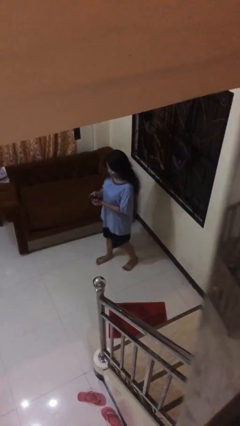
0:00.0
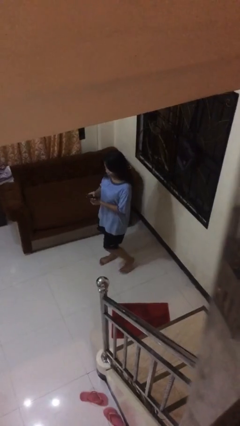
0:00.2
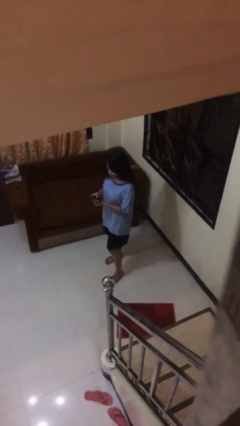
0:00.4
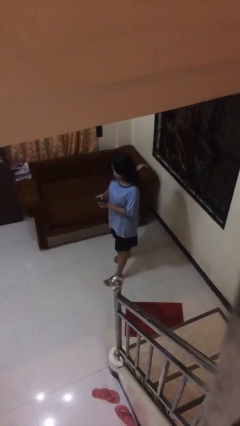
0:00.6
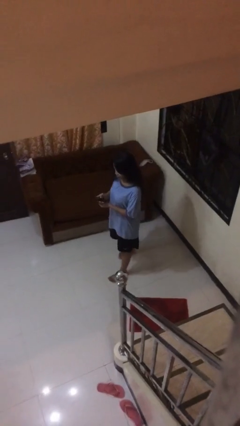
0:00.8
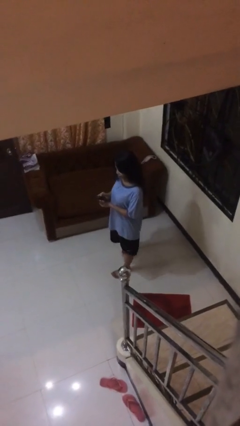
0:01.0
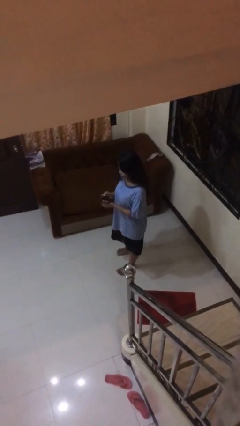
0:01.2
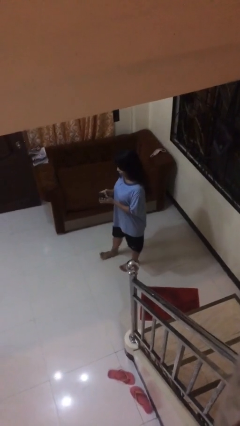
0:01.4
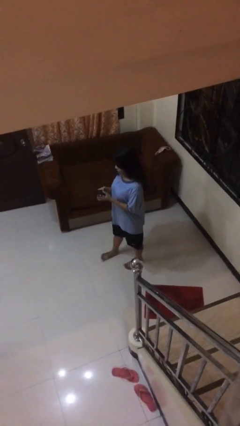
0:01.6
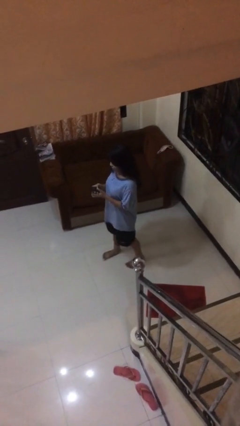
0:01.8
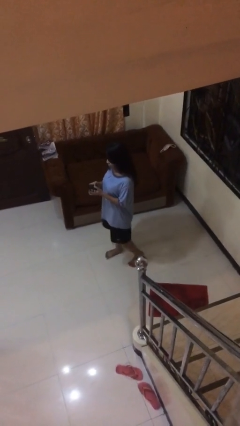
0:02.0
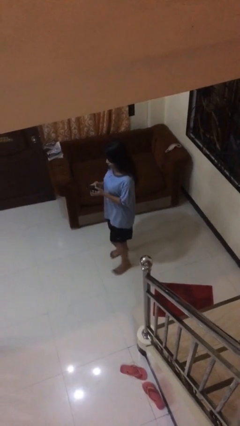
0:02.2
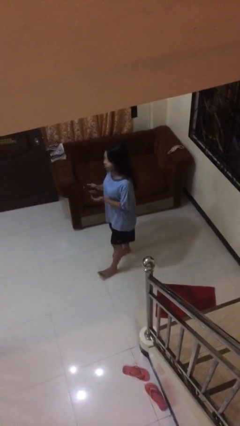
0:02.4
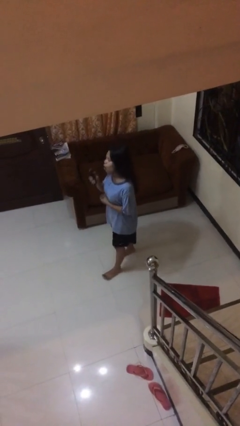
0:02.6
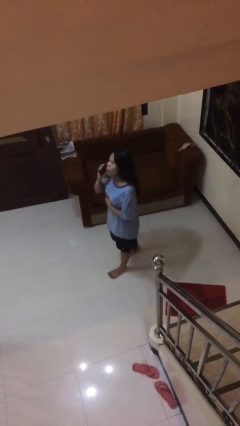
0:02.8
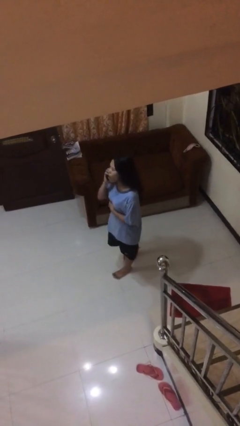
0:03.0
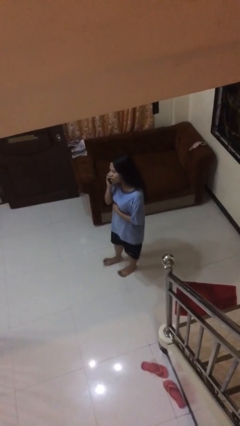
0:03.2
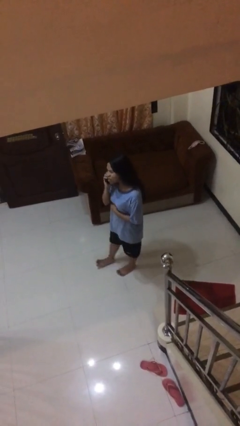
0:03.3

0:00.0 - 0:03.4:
person texts on phone

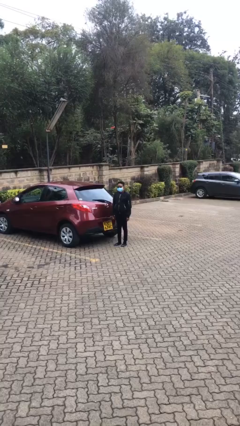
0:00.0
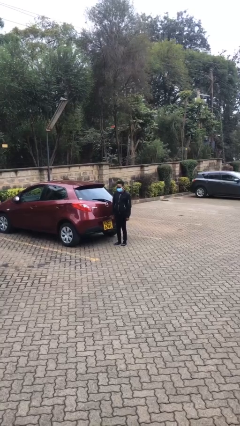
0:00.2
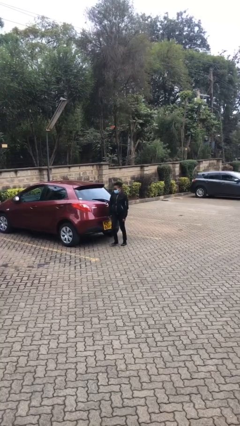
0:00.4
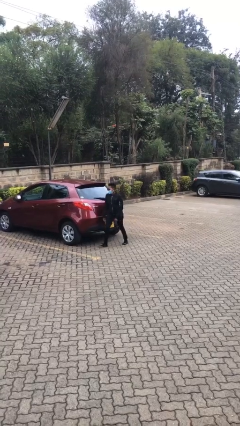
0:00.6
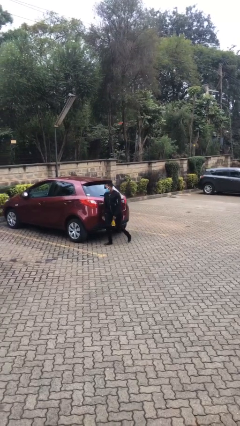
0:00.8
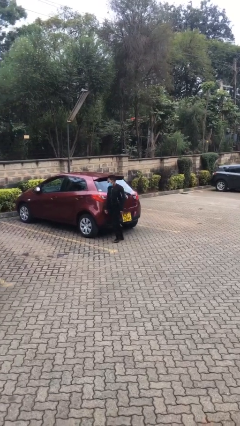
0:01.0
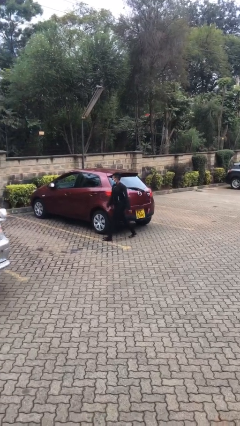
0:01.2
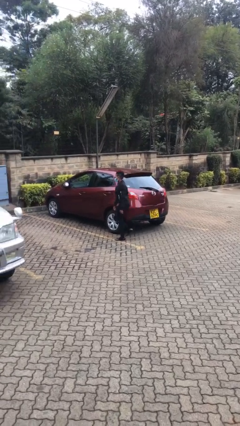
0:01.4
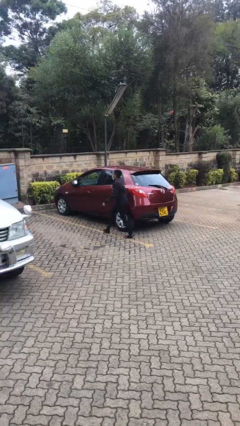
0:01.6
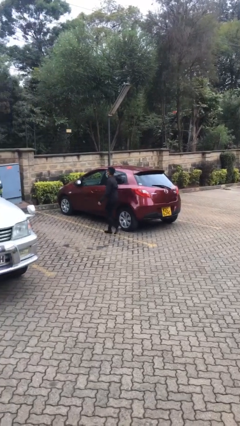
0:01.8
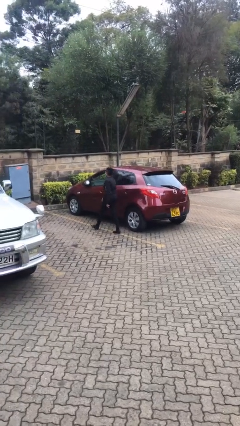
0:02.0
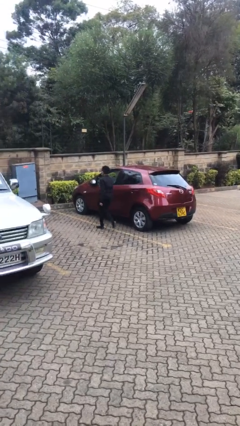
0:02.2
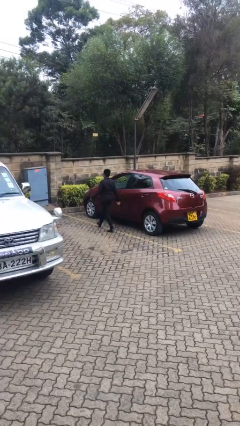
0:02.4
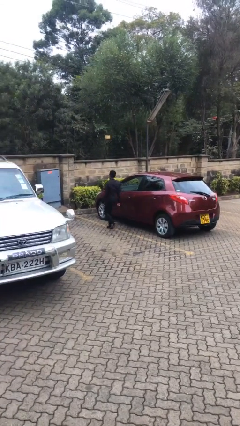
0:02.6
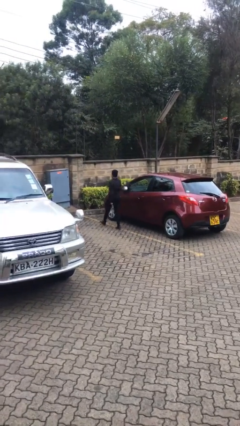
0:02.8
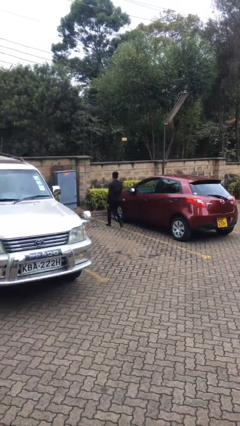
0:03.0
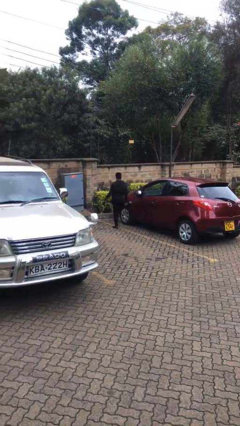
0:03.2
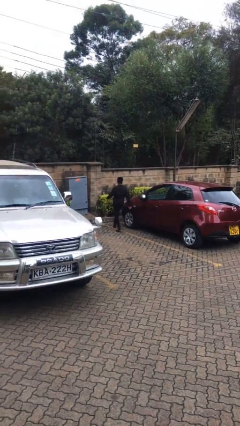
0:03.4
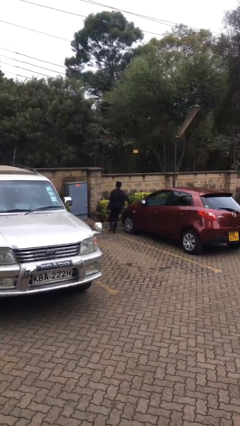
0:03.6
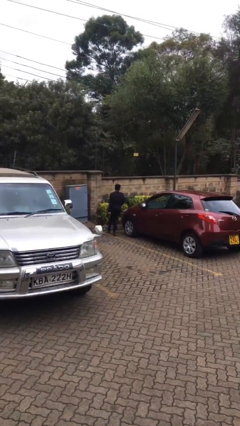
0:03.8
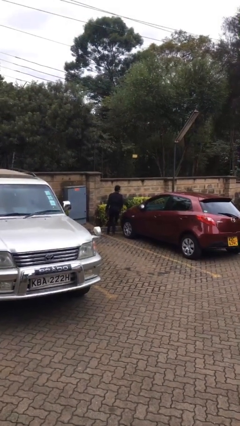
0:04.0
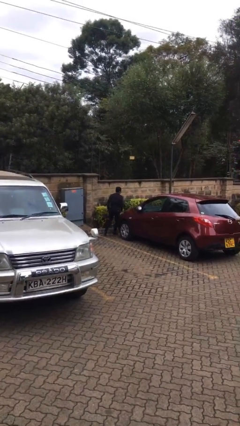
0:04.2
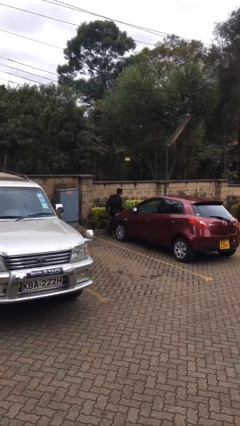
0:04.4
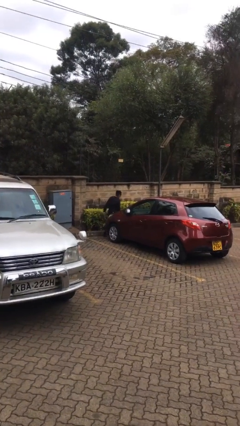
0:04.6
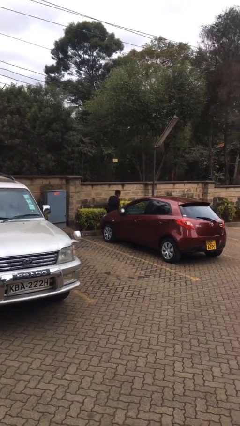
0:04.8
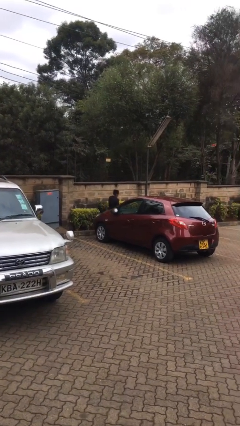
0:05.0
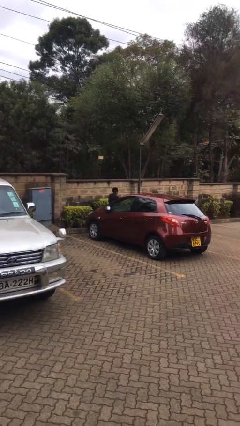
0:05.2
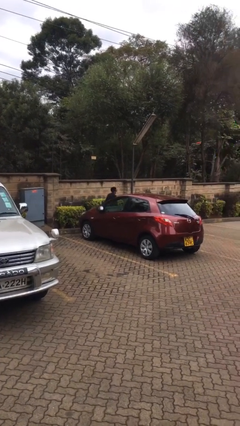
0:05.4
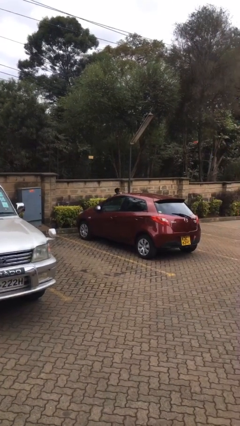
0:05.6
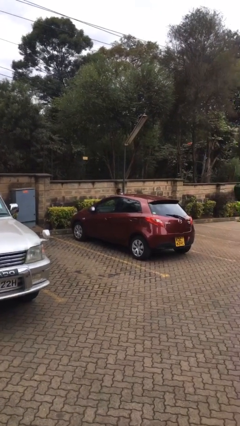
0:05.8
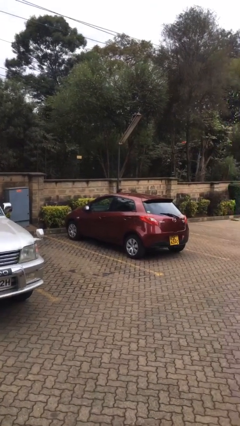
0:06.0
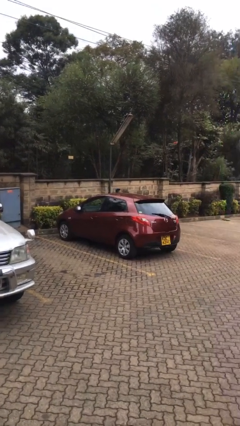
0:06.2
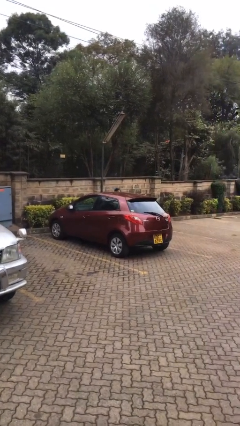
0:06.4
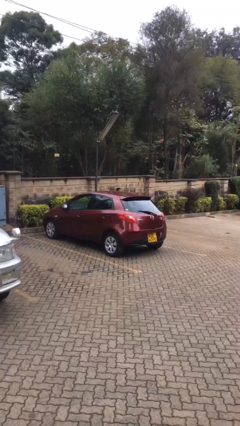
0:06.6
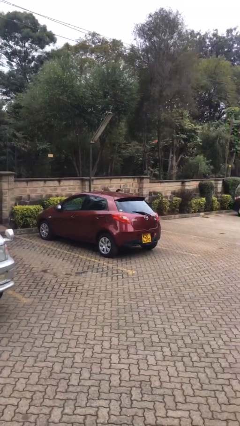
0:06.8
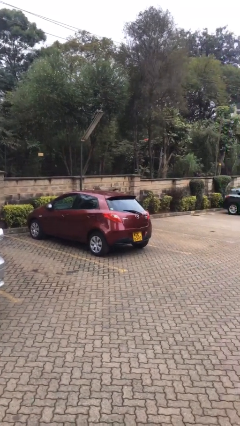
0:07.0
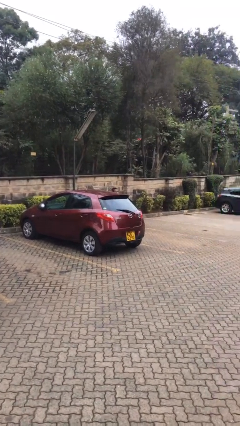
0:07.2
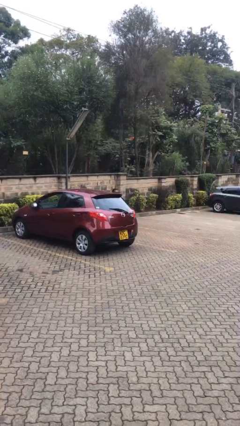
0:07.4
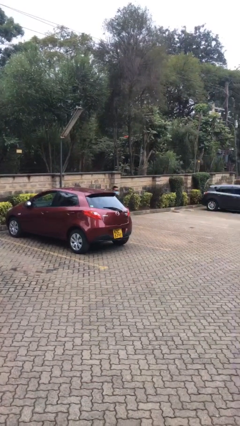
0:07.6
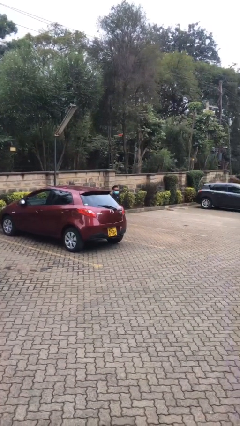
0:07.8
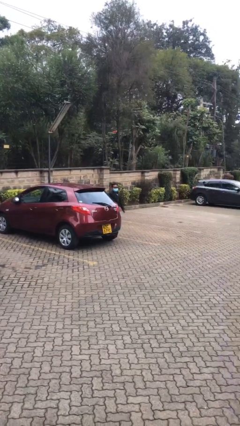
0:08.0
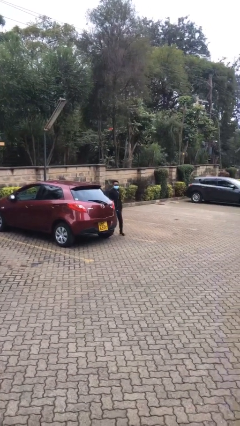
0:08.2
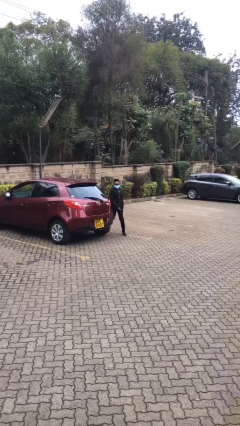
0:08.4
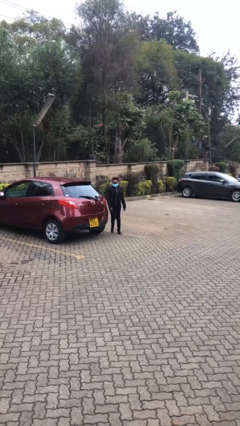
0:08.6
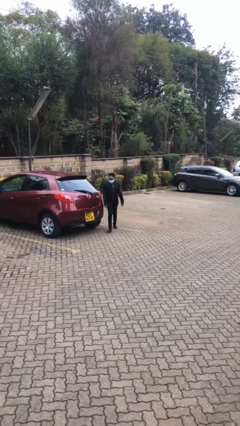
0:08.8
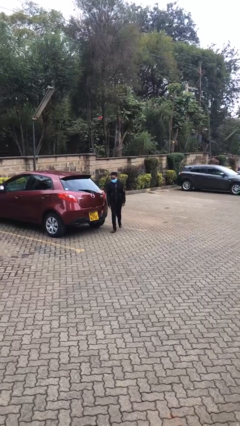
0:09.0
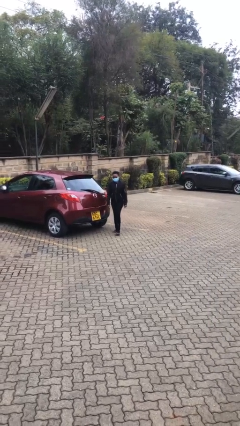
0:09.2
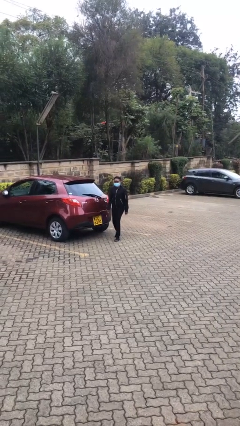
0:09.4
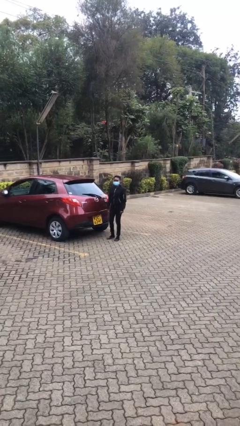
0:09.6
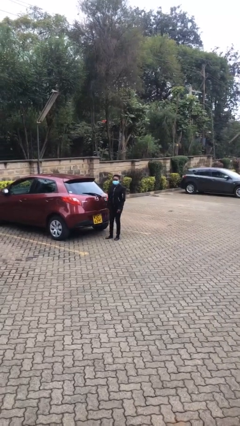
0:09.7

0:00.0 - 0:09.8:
person walks around car

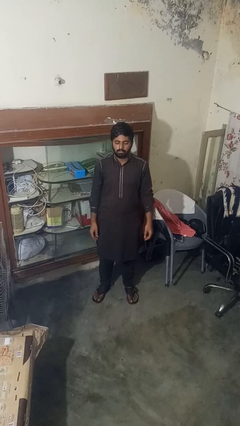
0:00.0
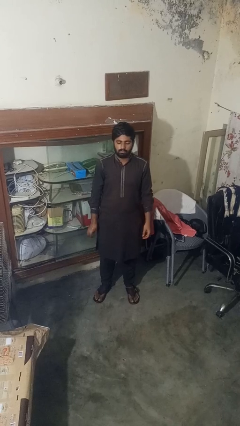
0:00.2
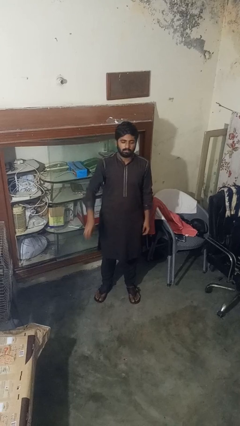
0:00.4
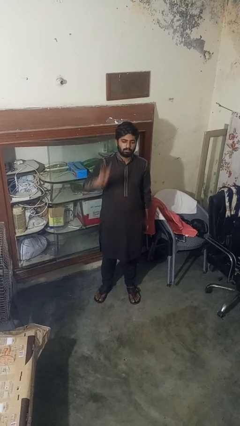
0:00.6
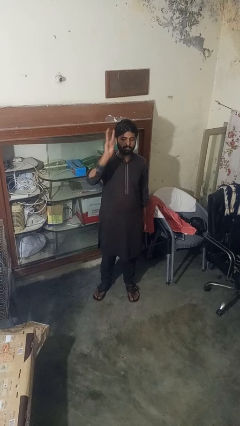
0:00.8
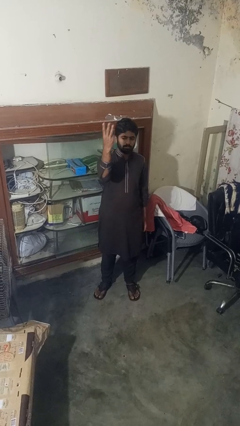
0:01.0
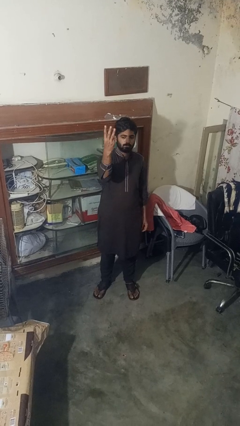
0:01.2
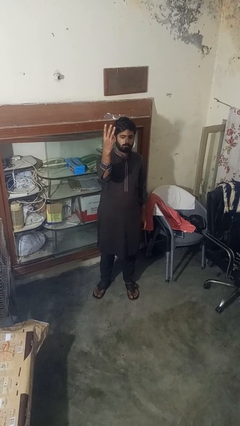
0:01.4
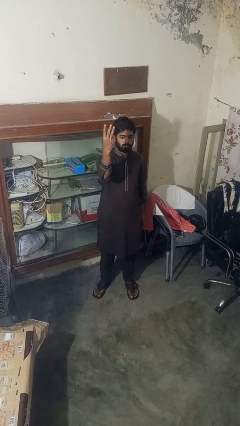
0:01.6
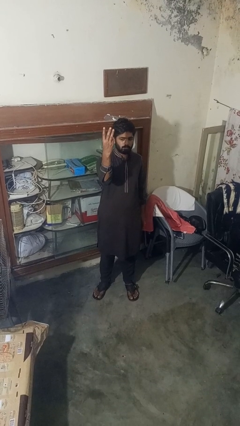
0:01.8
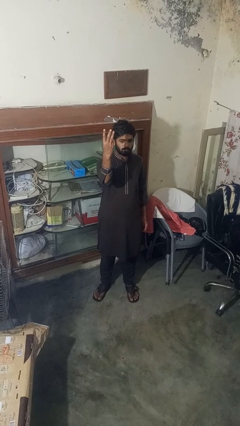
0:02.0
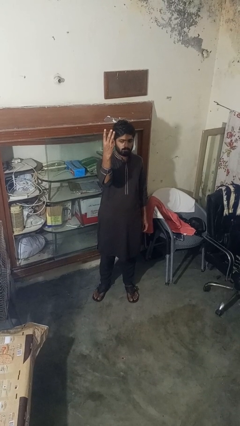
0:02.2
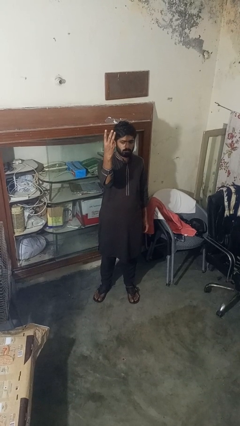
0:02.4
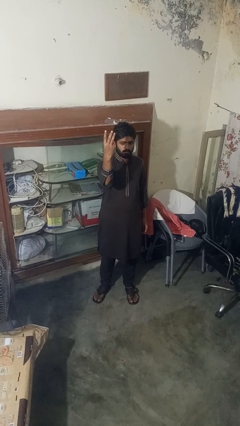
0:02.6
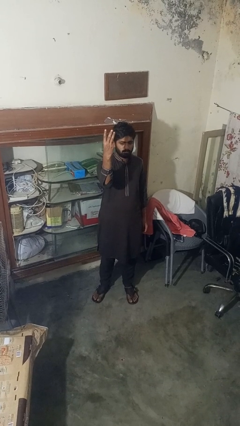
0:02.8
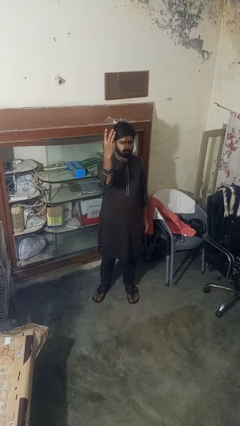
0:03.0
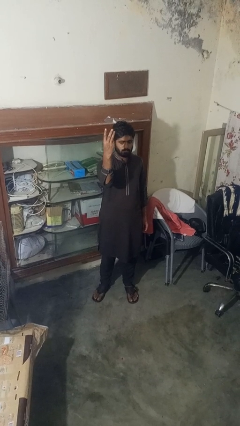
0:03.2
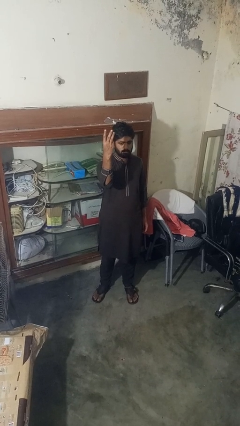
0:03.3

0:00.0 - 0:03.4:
person gestures number three

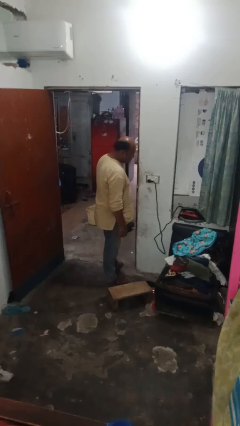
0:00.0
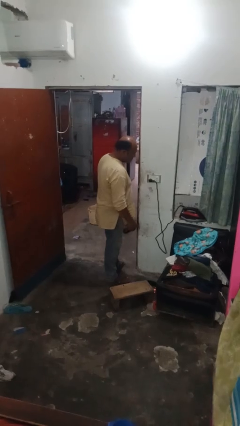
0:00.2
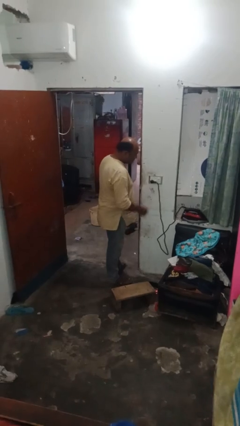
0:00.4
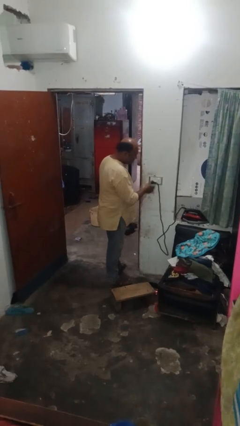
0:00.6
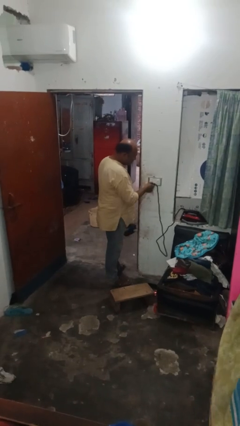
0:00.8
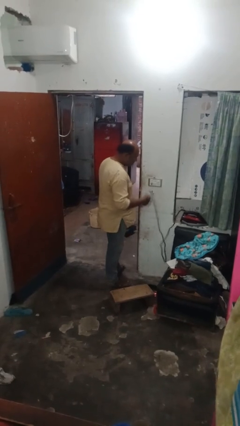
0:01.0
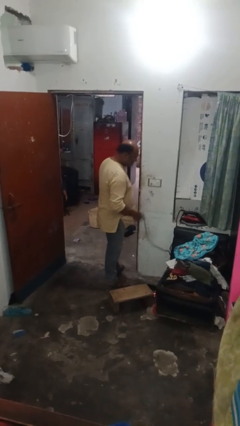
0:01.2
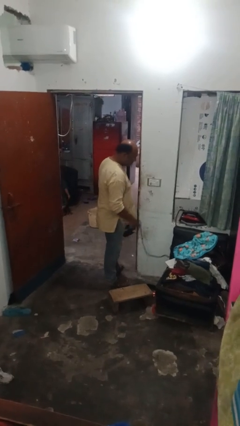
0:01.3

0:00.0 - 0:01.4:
person unplugs from electrical socket
